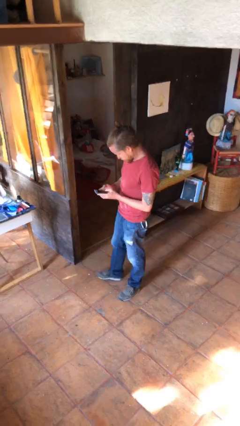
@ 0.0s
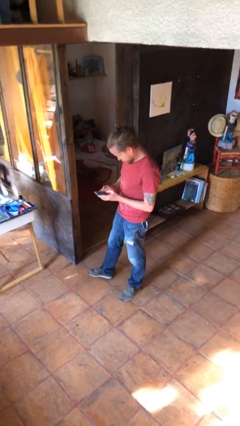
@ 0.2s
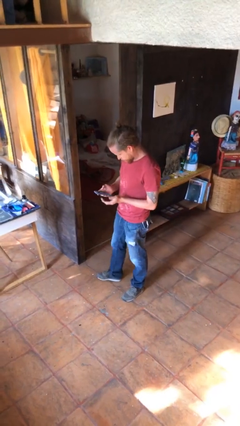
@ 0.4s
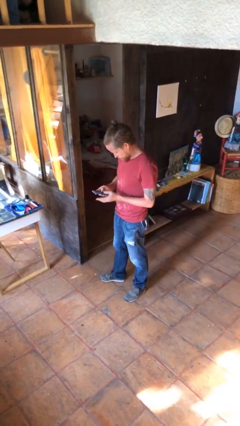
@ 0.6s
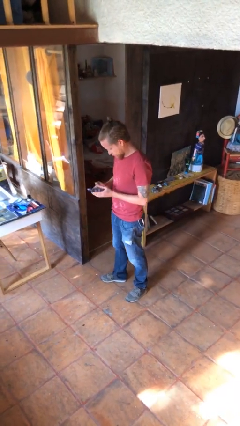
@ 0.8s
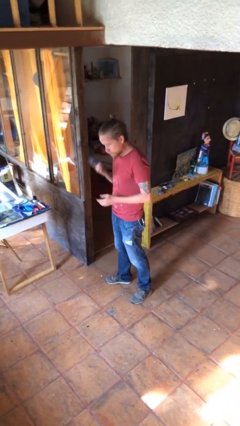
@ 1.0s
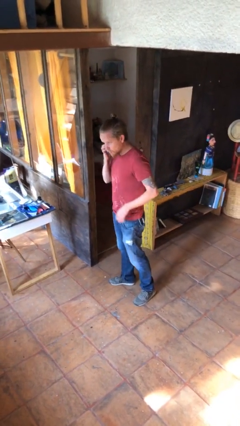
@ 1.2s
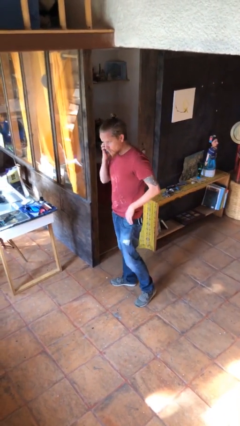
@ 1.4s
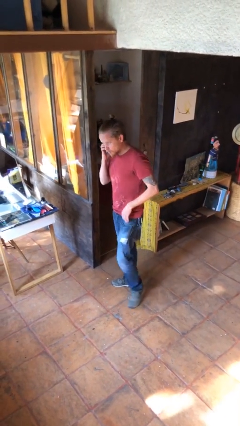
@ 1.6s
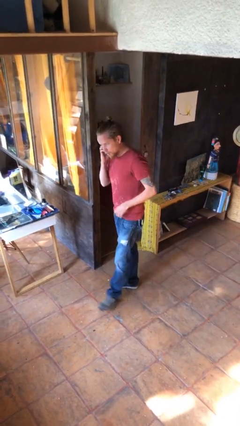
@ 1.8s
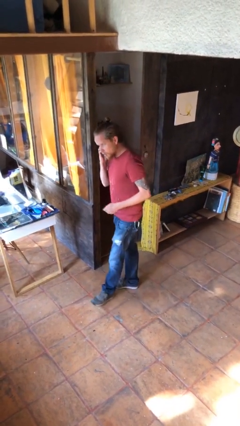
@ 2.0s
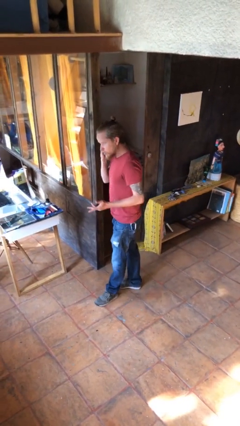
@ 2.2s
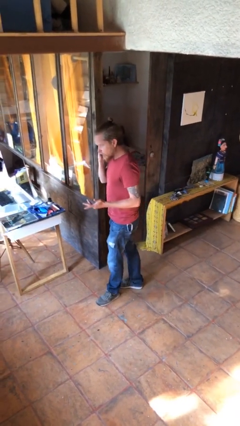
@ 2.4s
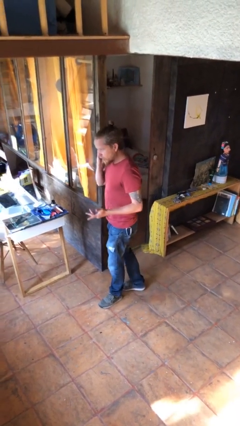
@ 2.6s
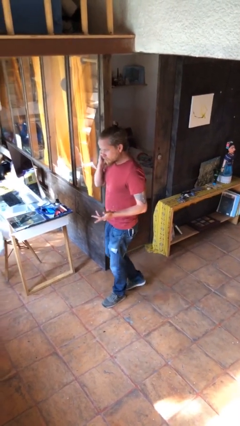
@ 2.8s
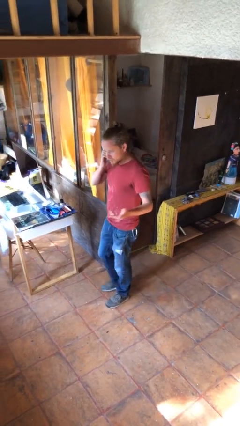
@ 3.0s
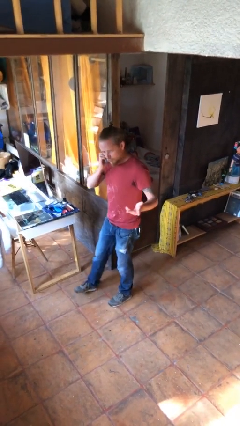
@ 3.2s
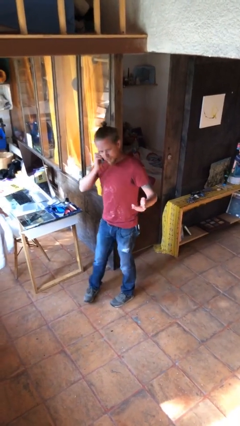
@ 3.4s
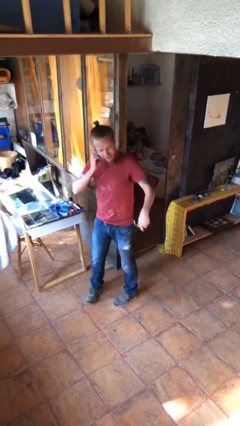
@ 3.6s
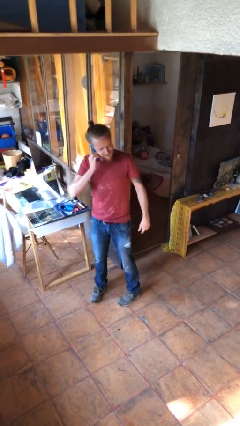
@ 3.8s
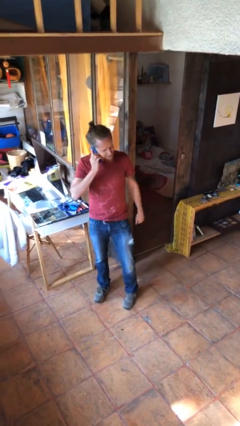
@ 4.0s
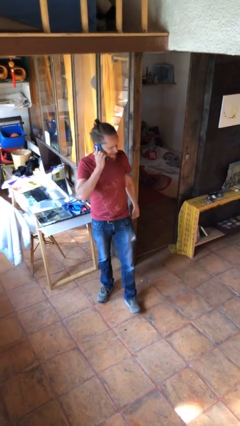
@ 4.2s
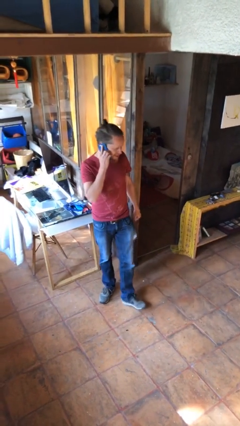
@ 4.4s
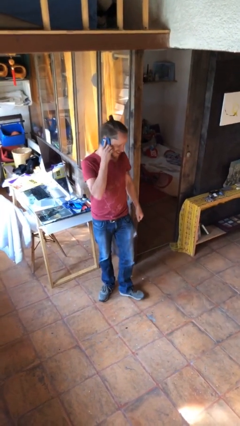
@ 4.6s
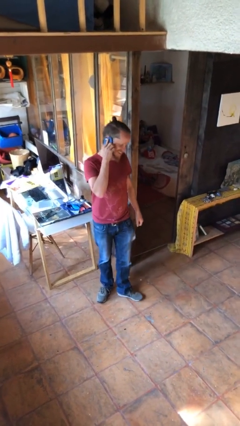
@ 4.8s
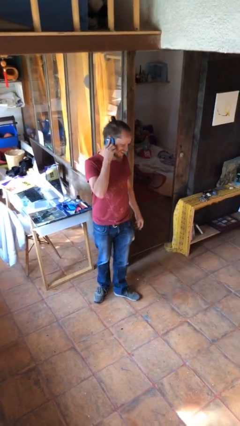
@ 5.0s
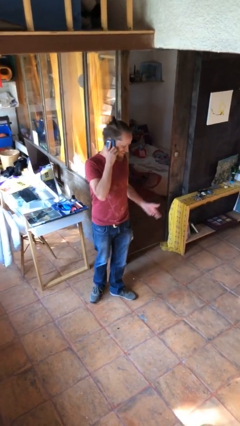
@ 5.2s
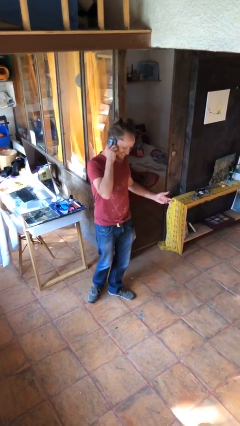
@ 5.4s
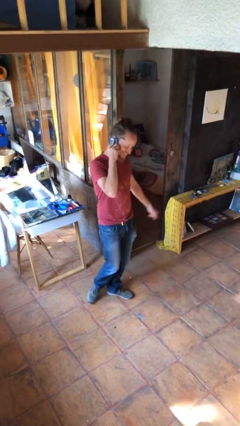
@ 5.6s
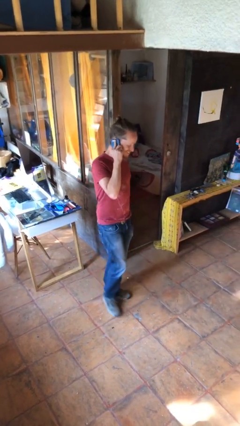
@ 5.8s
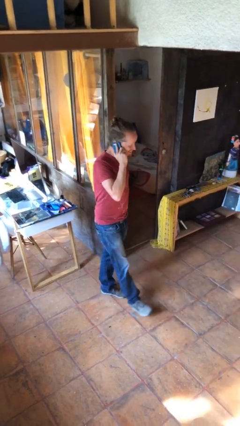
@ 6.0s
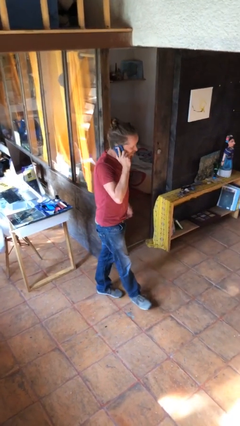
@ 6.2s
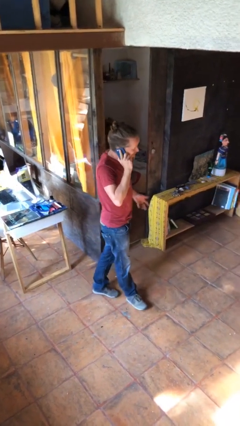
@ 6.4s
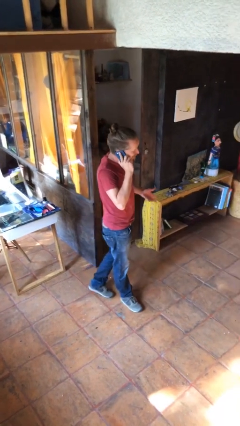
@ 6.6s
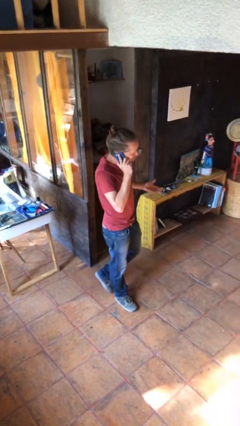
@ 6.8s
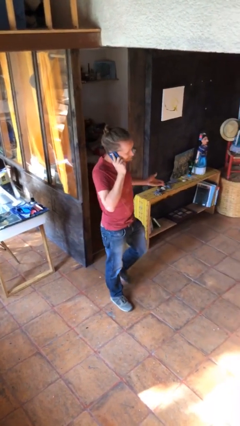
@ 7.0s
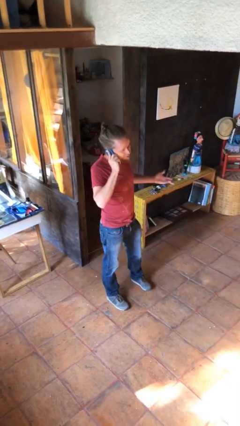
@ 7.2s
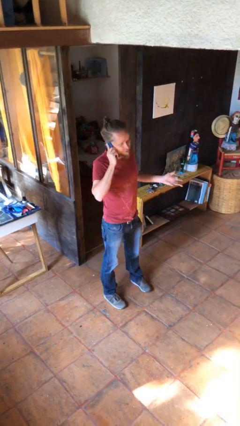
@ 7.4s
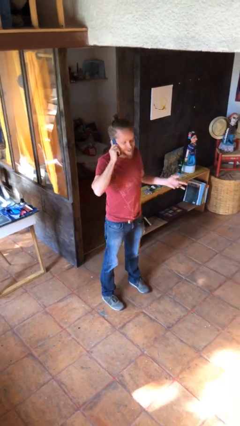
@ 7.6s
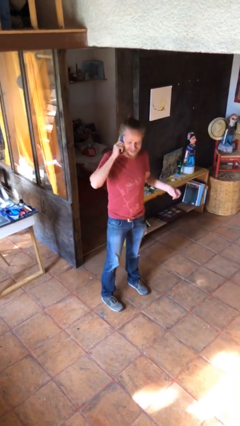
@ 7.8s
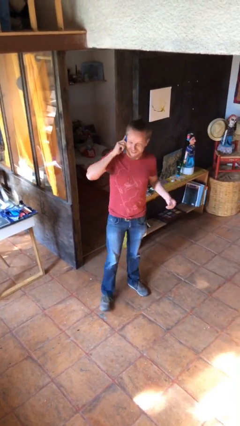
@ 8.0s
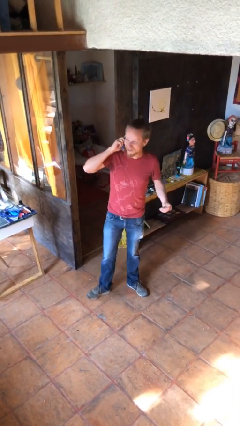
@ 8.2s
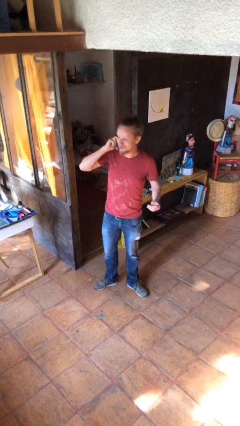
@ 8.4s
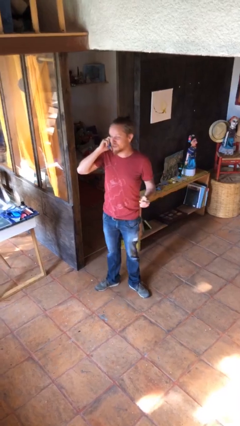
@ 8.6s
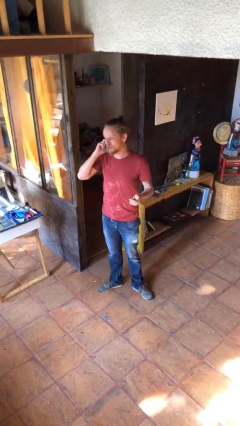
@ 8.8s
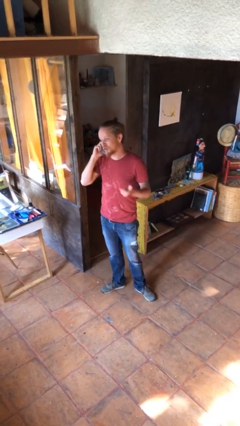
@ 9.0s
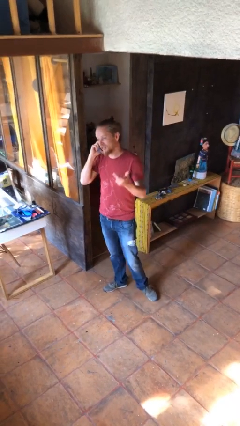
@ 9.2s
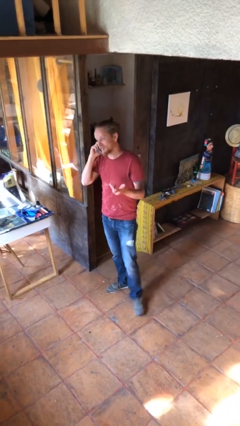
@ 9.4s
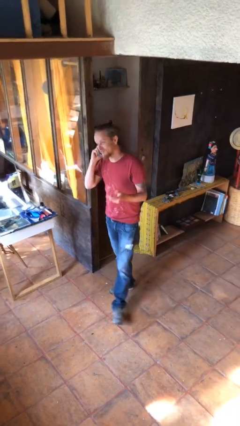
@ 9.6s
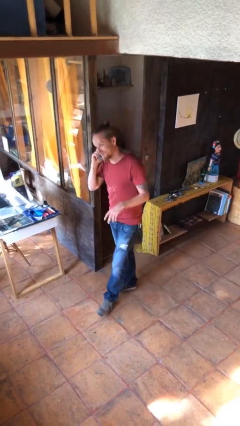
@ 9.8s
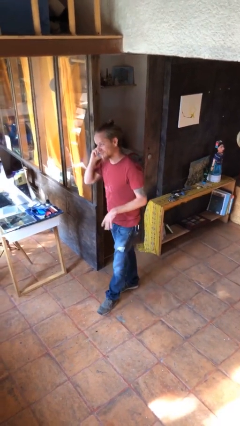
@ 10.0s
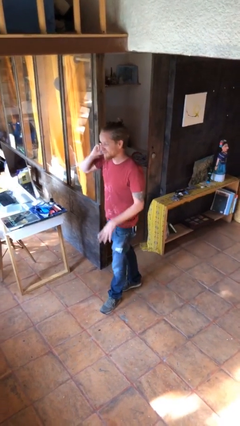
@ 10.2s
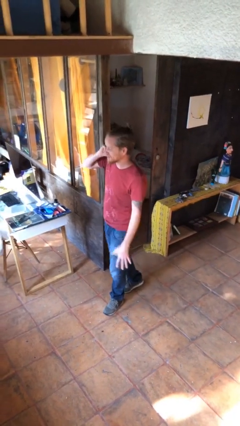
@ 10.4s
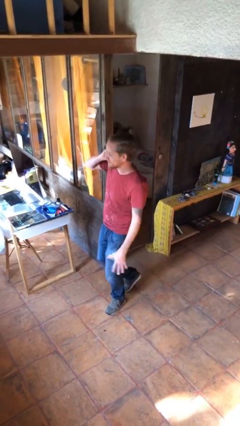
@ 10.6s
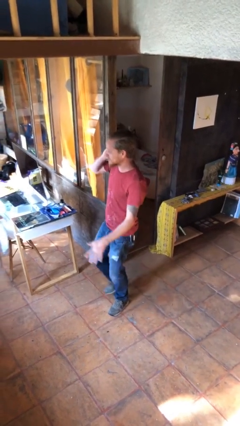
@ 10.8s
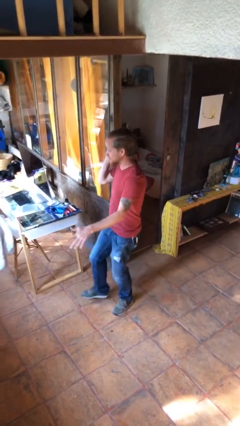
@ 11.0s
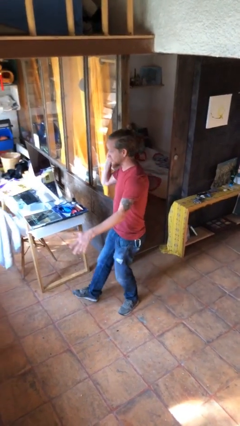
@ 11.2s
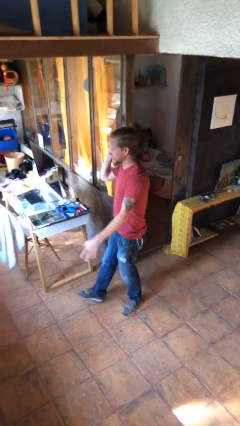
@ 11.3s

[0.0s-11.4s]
person talks on phone

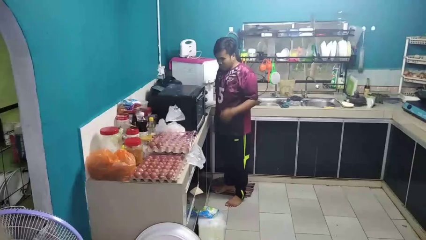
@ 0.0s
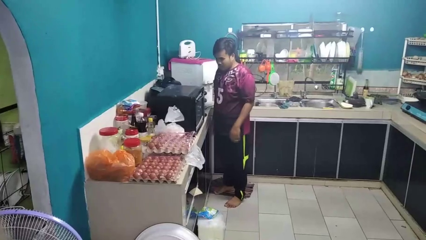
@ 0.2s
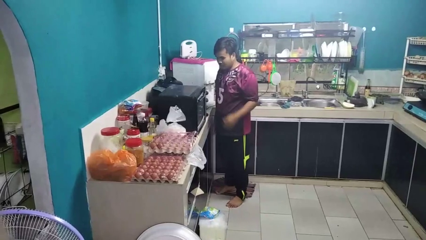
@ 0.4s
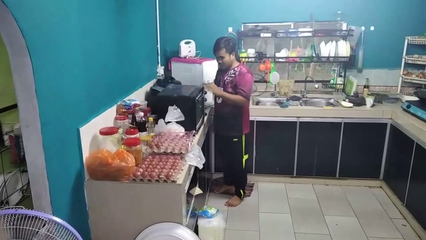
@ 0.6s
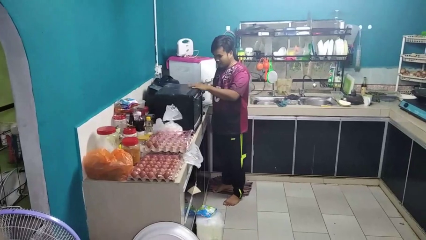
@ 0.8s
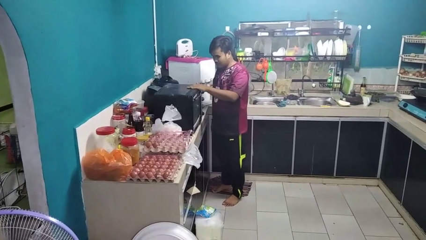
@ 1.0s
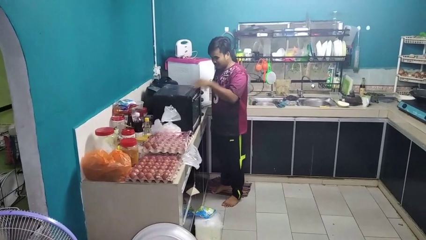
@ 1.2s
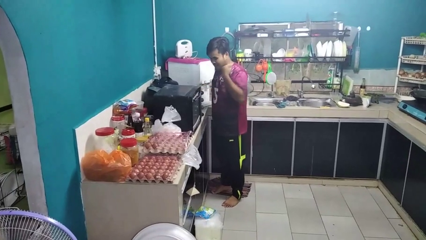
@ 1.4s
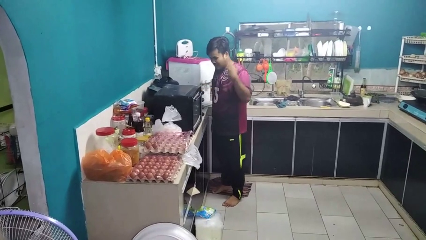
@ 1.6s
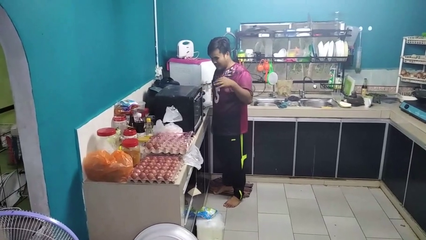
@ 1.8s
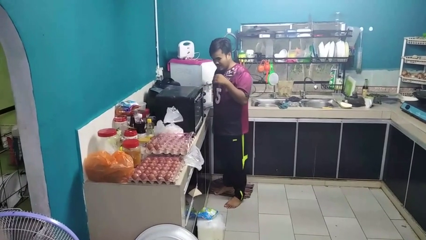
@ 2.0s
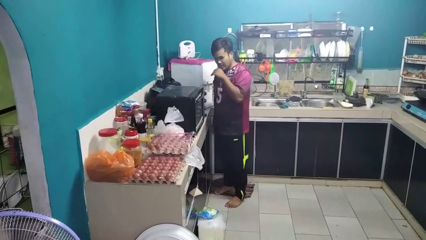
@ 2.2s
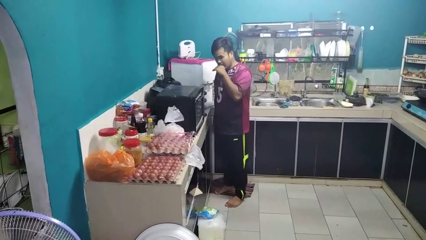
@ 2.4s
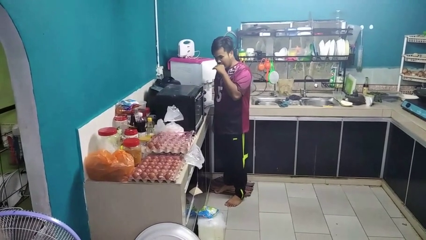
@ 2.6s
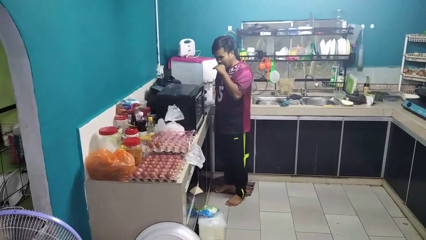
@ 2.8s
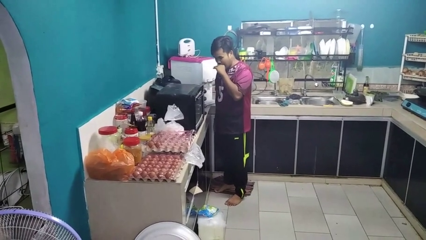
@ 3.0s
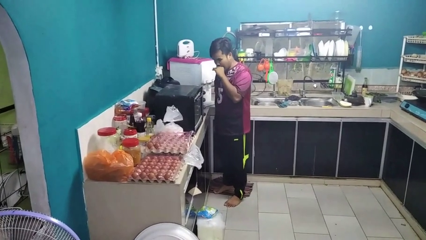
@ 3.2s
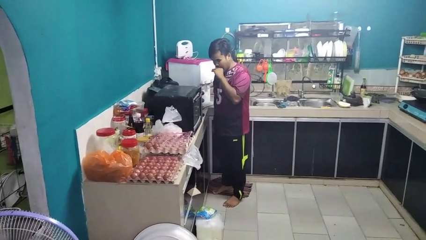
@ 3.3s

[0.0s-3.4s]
person burns hand

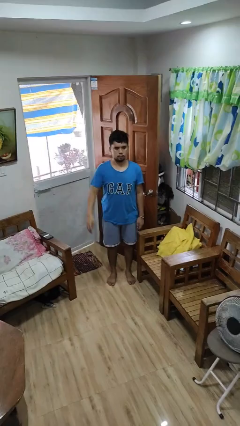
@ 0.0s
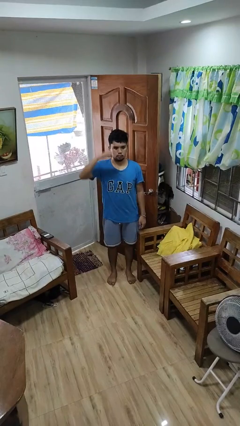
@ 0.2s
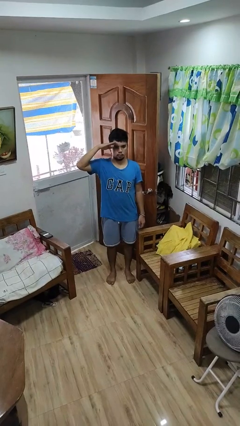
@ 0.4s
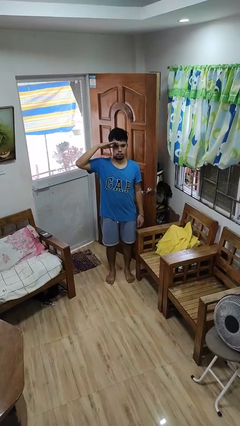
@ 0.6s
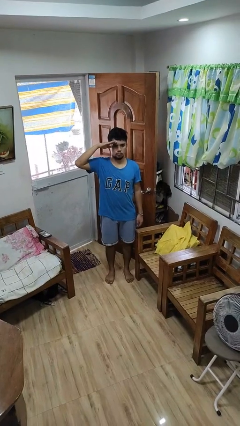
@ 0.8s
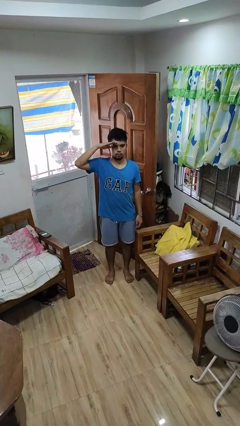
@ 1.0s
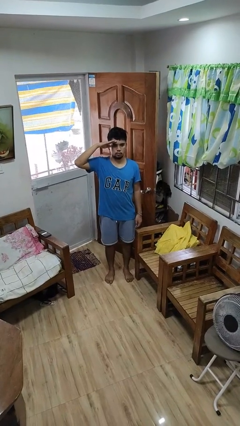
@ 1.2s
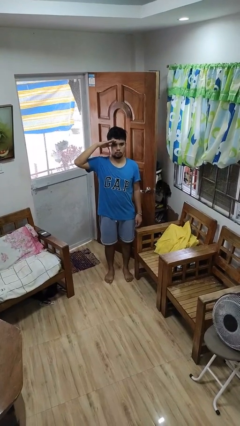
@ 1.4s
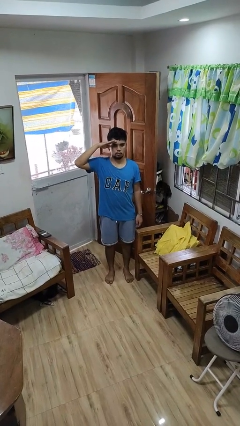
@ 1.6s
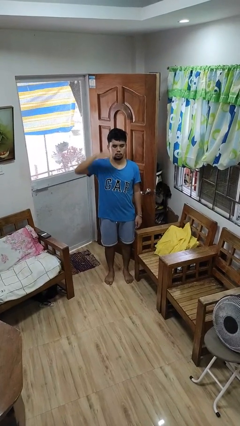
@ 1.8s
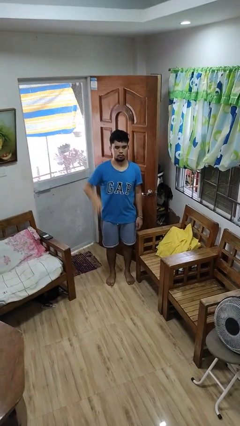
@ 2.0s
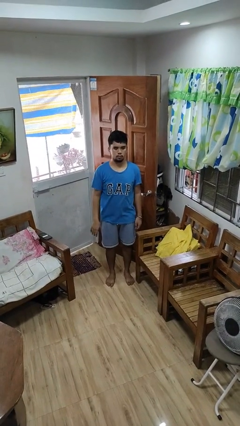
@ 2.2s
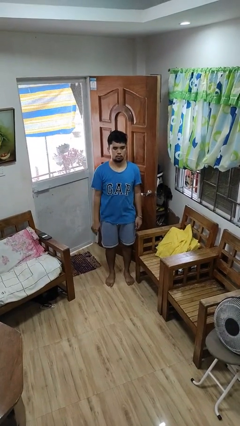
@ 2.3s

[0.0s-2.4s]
person salutes

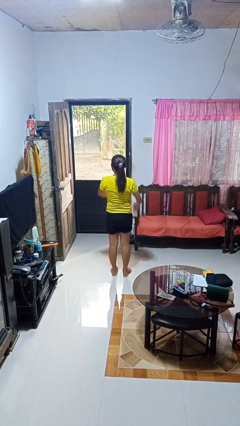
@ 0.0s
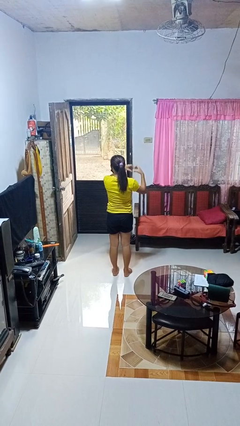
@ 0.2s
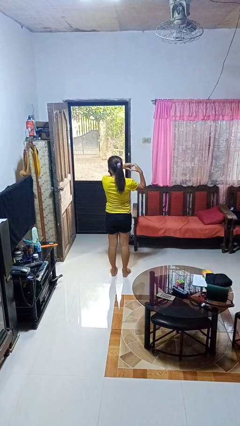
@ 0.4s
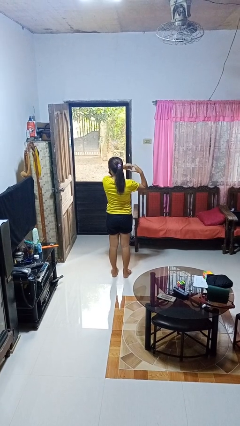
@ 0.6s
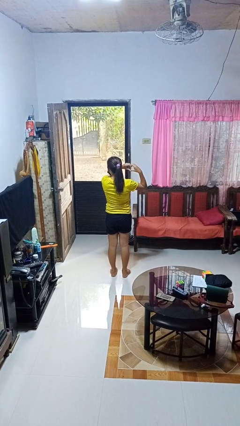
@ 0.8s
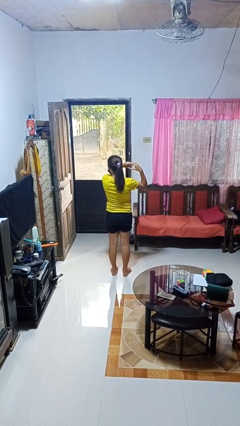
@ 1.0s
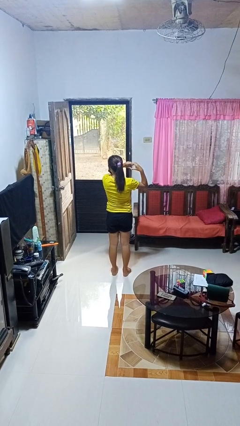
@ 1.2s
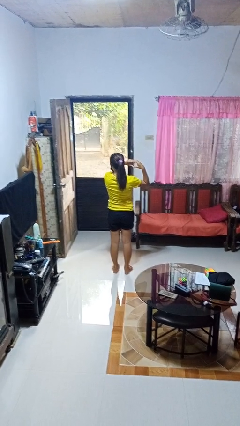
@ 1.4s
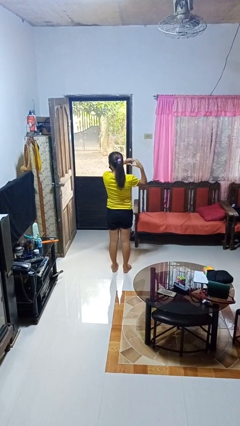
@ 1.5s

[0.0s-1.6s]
person gestures heart
